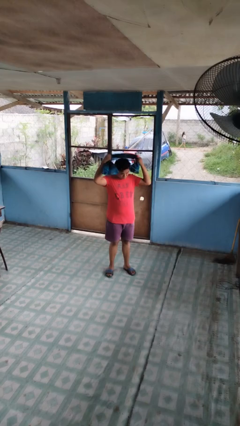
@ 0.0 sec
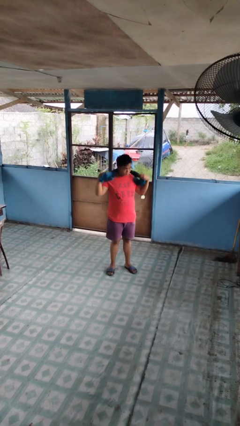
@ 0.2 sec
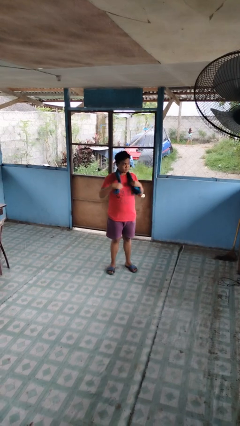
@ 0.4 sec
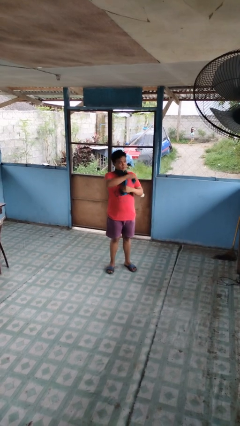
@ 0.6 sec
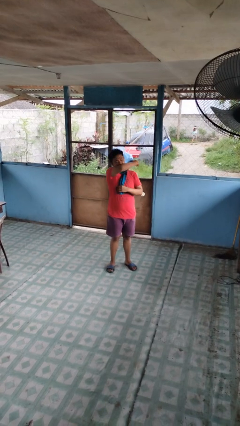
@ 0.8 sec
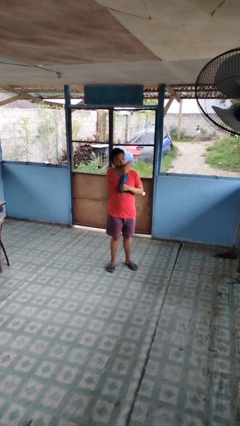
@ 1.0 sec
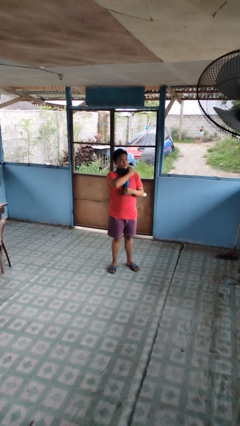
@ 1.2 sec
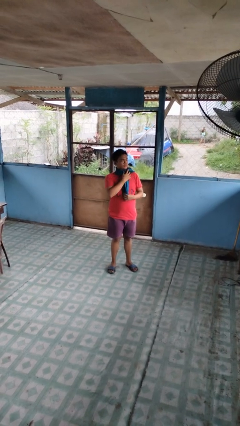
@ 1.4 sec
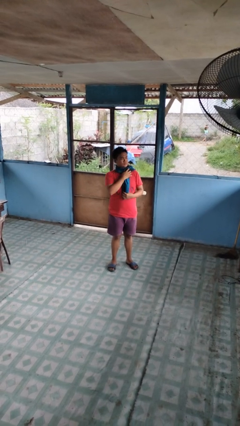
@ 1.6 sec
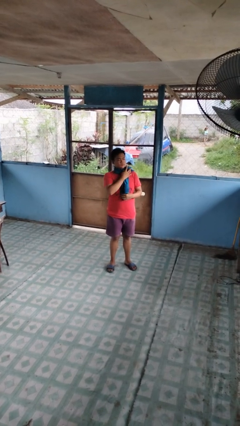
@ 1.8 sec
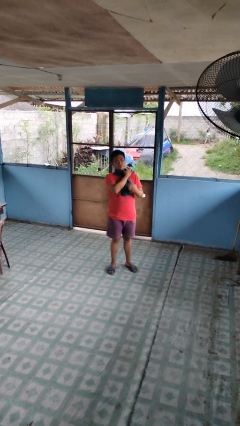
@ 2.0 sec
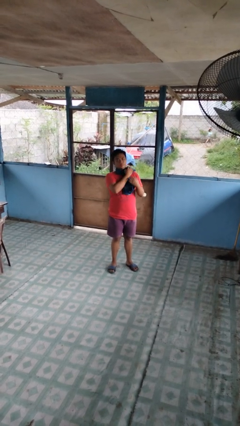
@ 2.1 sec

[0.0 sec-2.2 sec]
person puts on scarf

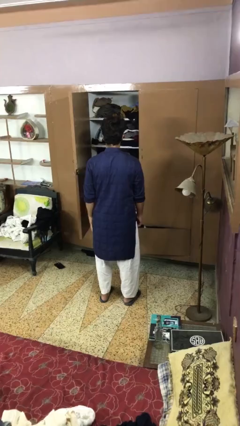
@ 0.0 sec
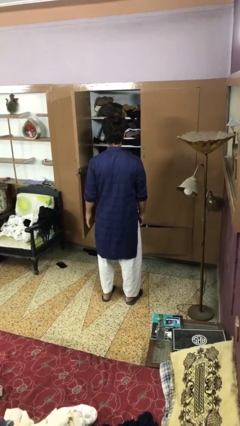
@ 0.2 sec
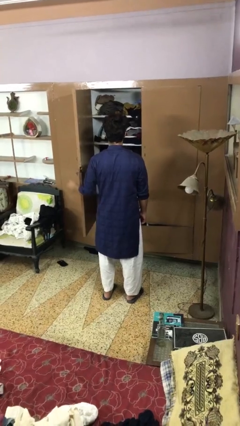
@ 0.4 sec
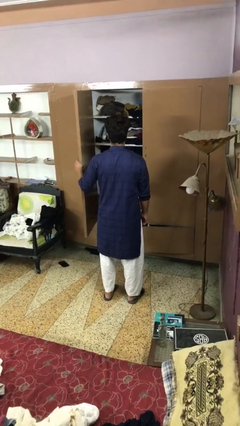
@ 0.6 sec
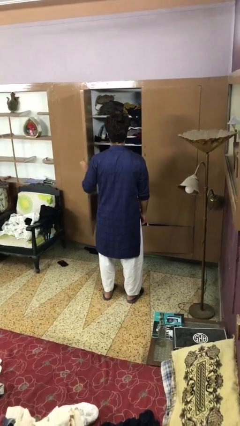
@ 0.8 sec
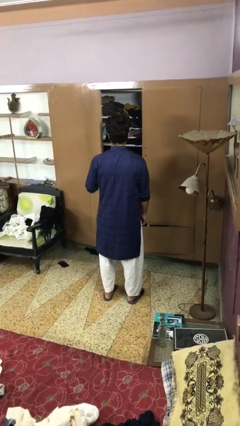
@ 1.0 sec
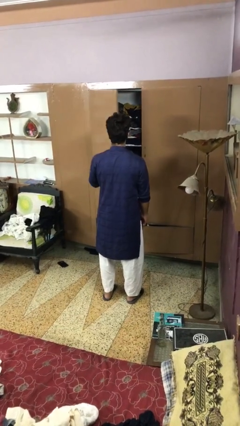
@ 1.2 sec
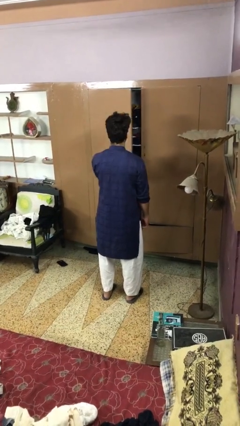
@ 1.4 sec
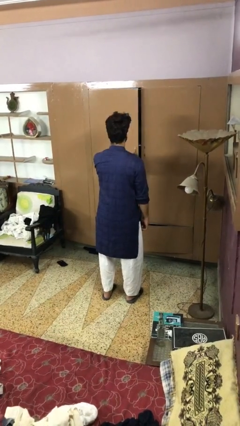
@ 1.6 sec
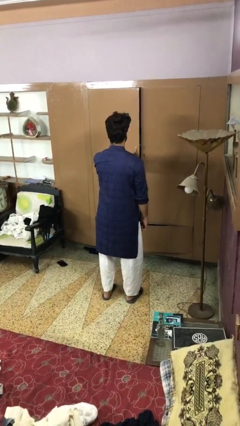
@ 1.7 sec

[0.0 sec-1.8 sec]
person closes closet door

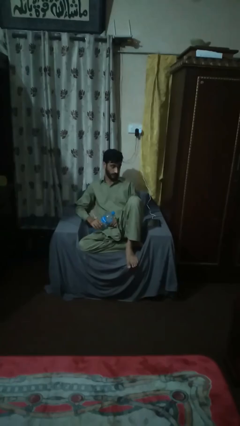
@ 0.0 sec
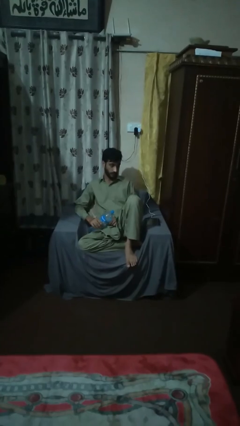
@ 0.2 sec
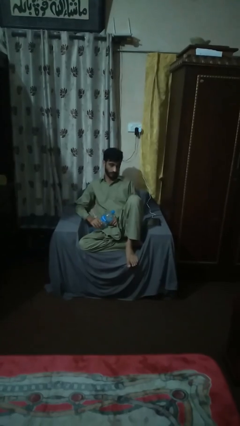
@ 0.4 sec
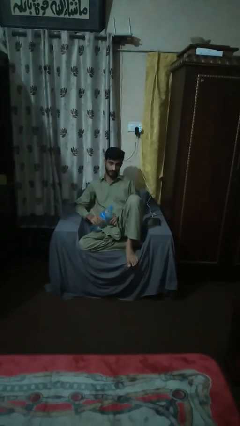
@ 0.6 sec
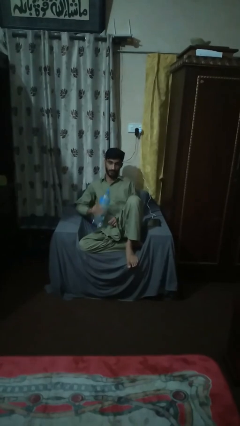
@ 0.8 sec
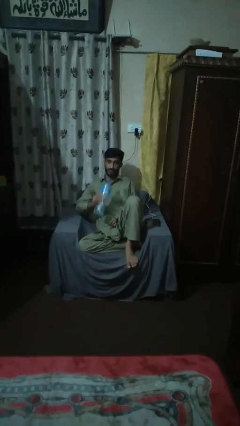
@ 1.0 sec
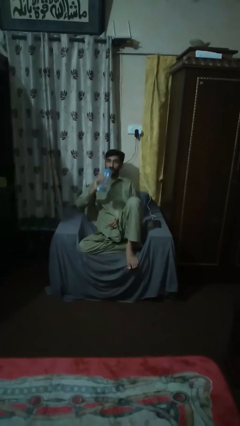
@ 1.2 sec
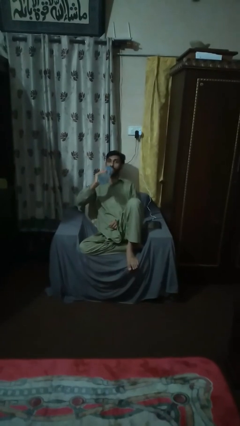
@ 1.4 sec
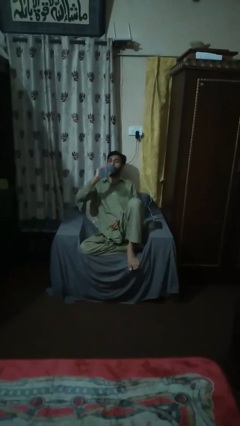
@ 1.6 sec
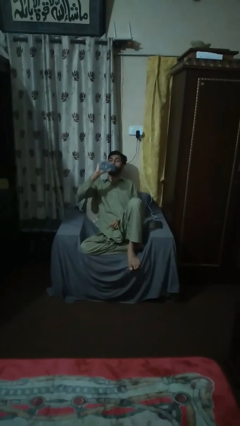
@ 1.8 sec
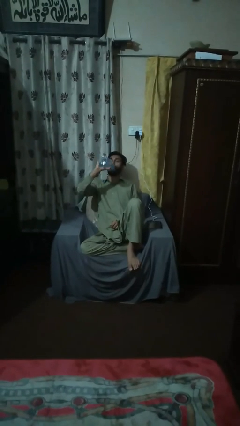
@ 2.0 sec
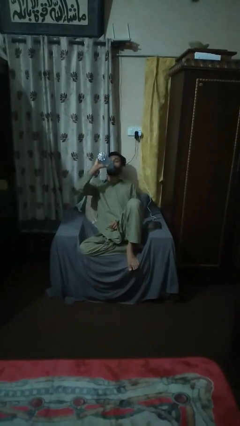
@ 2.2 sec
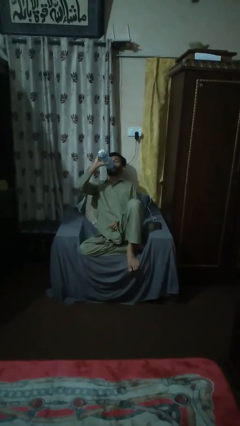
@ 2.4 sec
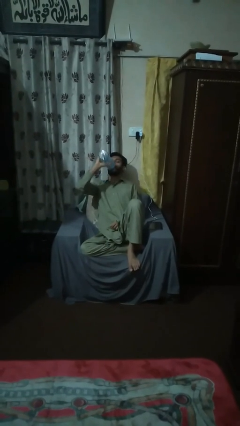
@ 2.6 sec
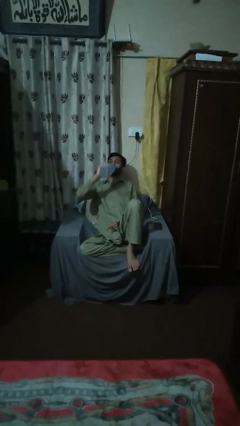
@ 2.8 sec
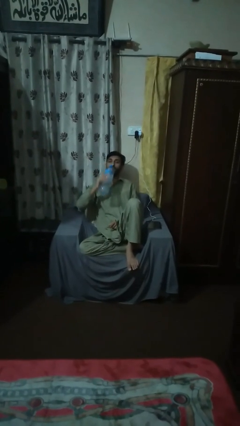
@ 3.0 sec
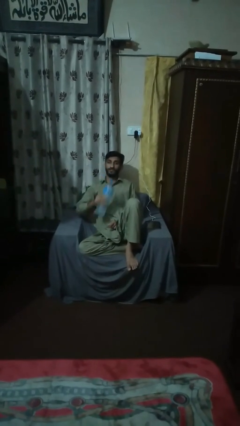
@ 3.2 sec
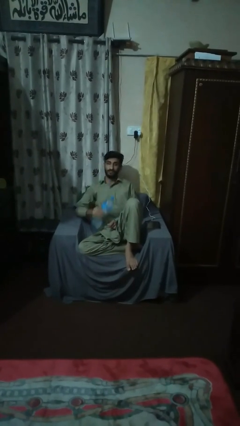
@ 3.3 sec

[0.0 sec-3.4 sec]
person drinks from bottle

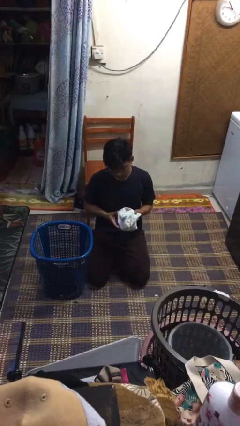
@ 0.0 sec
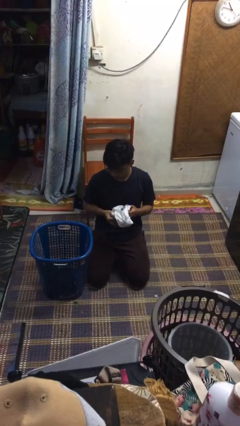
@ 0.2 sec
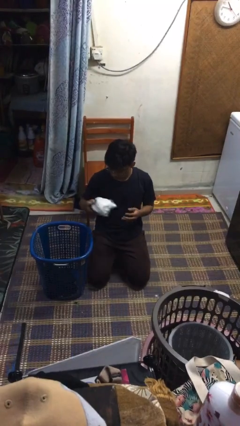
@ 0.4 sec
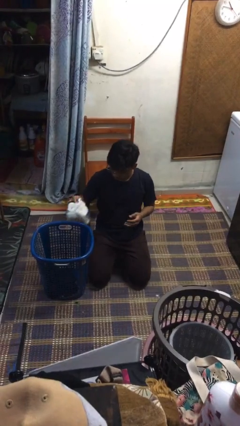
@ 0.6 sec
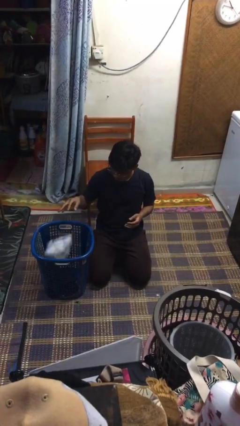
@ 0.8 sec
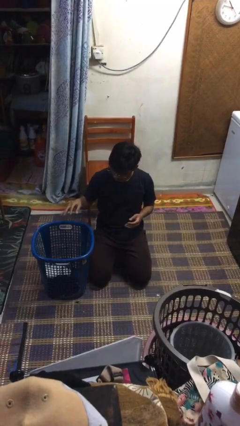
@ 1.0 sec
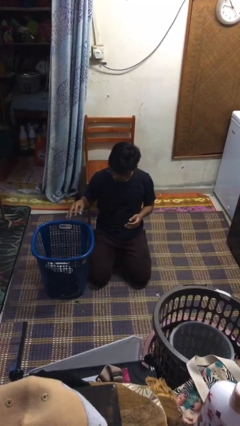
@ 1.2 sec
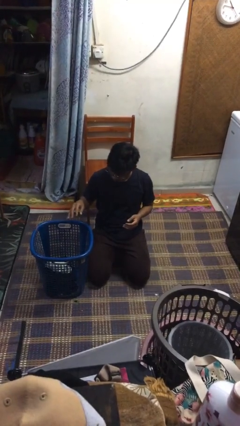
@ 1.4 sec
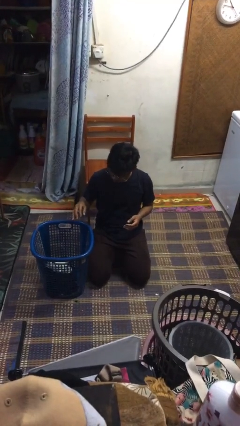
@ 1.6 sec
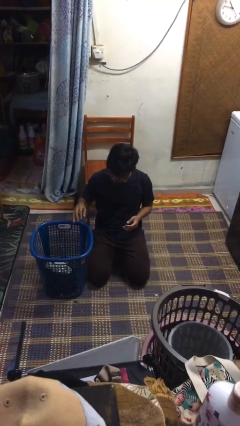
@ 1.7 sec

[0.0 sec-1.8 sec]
person puts object into basket

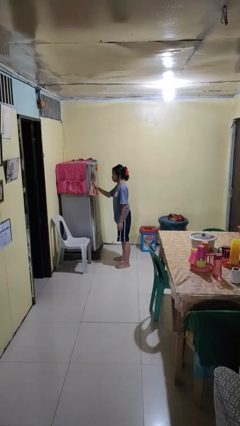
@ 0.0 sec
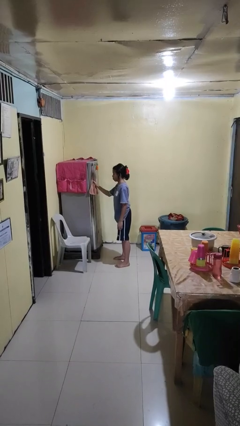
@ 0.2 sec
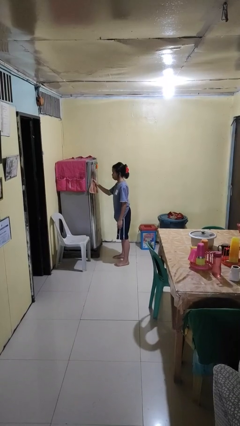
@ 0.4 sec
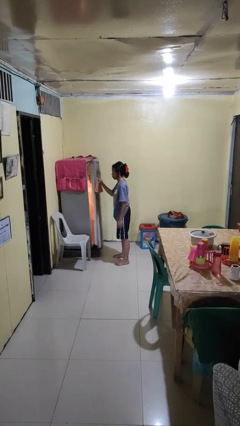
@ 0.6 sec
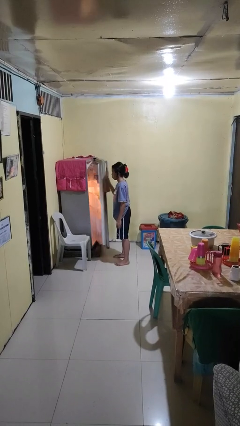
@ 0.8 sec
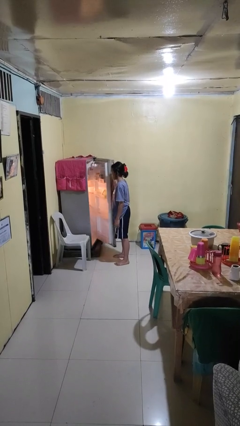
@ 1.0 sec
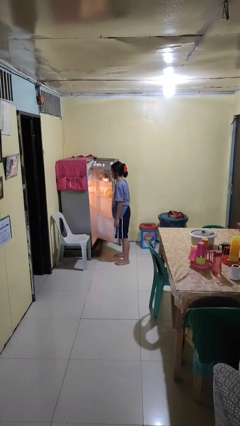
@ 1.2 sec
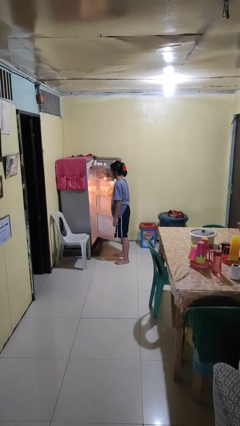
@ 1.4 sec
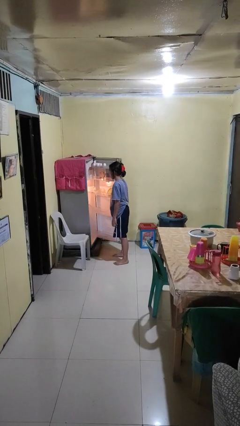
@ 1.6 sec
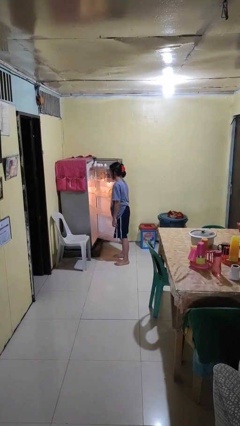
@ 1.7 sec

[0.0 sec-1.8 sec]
person opens refrigerator

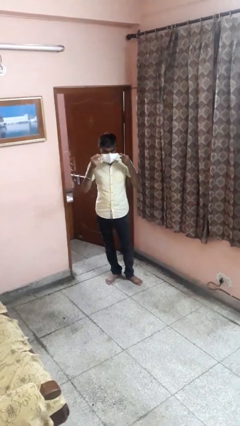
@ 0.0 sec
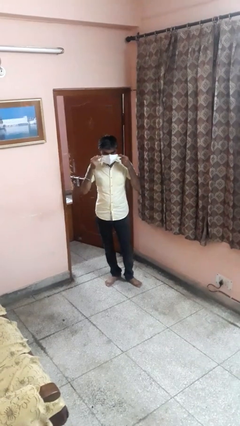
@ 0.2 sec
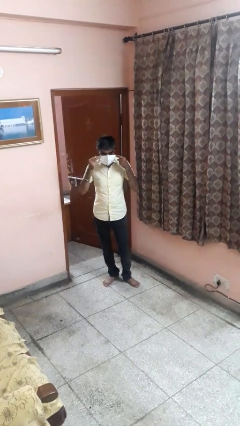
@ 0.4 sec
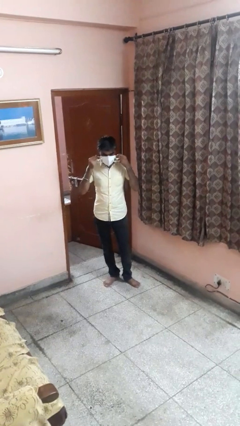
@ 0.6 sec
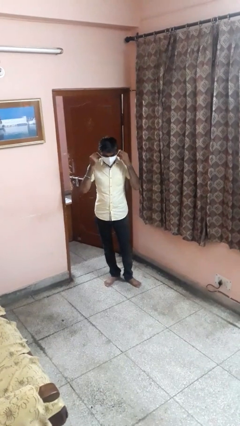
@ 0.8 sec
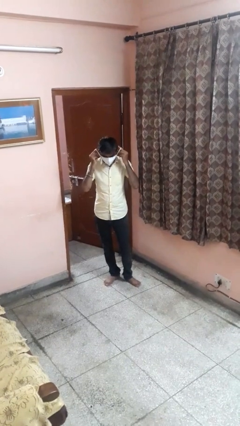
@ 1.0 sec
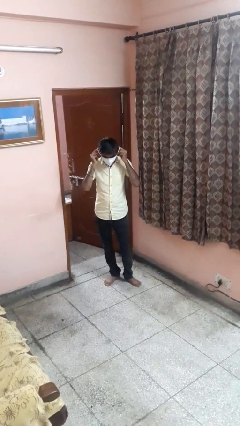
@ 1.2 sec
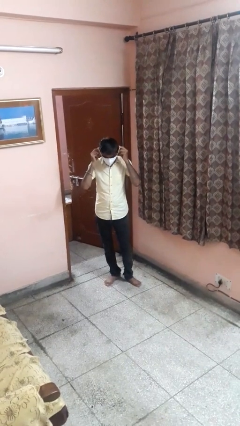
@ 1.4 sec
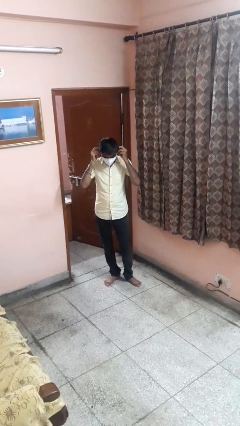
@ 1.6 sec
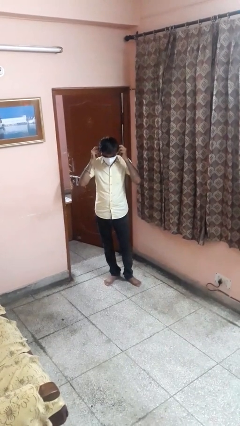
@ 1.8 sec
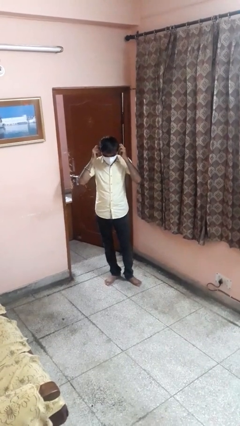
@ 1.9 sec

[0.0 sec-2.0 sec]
person puts on facemask

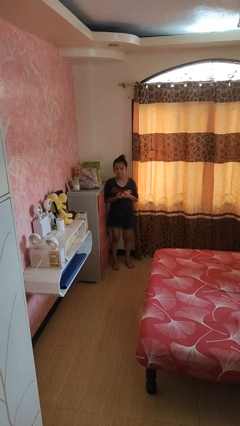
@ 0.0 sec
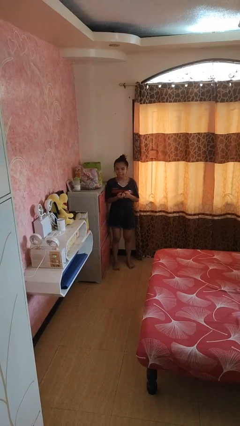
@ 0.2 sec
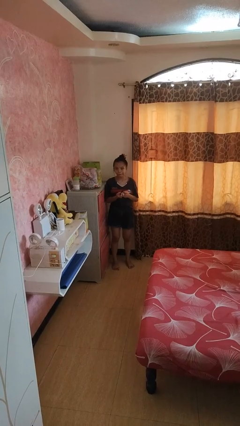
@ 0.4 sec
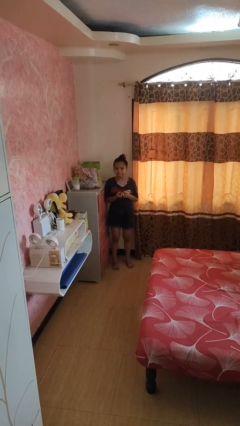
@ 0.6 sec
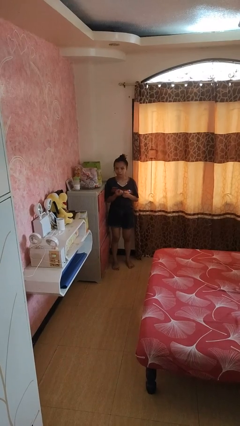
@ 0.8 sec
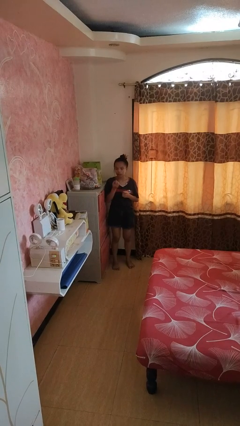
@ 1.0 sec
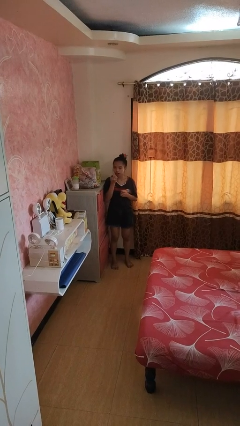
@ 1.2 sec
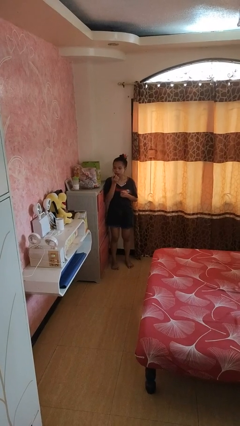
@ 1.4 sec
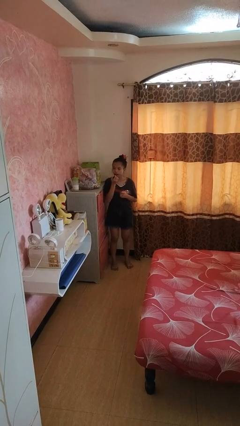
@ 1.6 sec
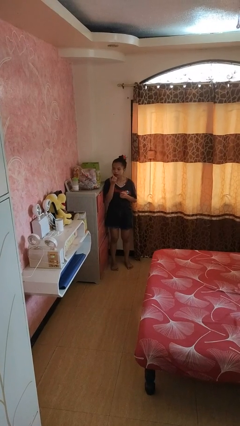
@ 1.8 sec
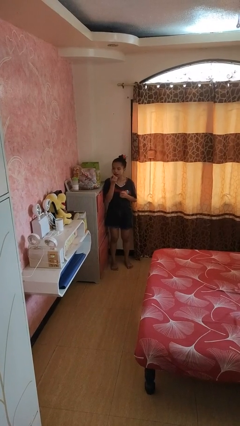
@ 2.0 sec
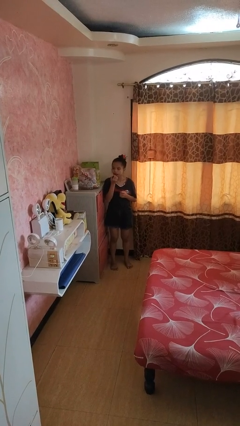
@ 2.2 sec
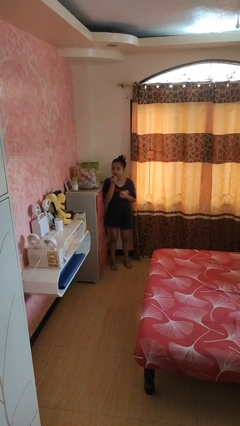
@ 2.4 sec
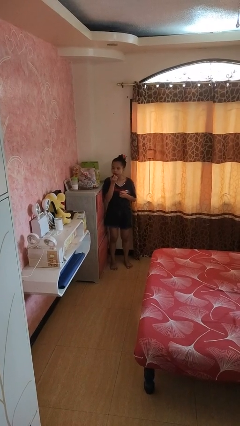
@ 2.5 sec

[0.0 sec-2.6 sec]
person applies lip makeup

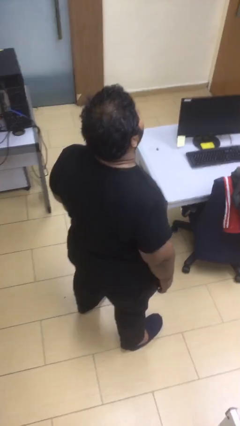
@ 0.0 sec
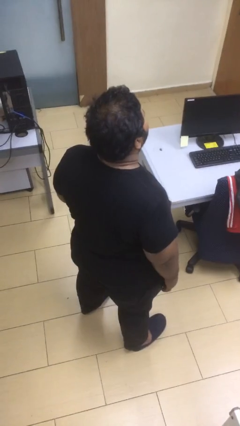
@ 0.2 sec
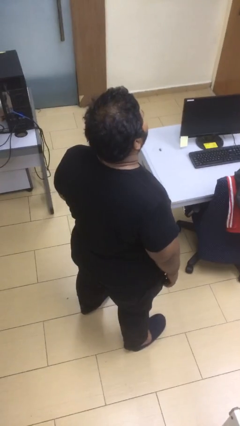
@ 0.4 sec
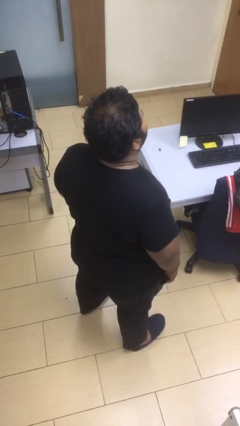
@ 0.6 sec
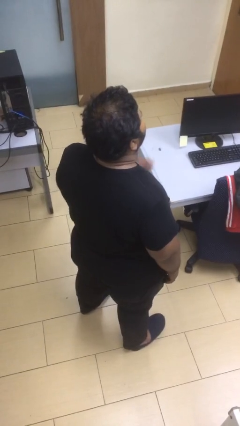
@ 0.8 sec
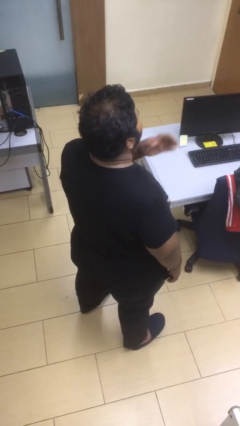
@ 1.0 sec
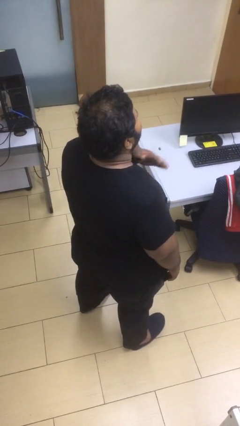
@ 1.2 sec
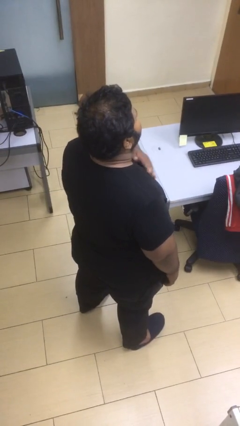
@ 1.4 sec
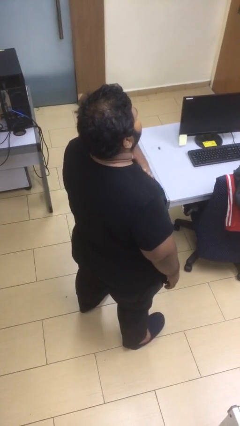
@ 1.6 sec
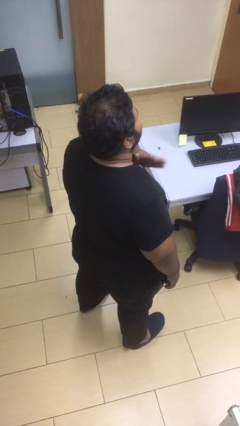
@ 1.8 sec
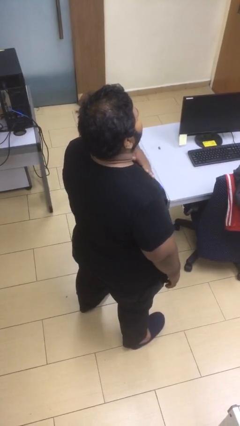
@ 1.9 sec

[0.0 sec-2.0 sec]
person drums on chest
